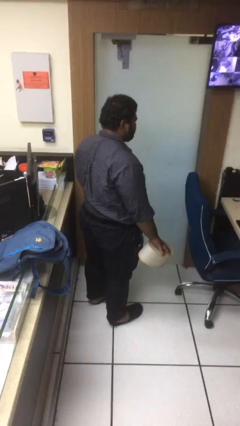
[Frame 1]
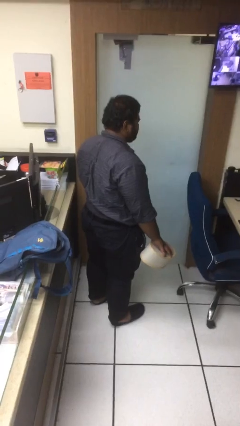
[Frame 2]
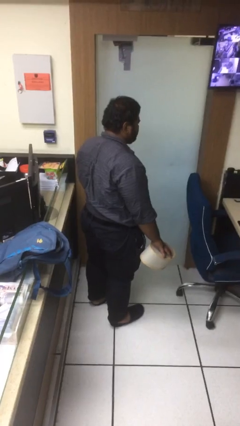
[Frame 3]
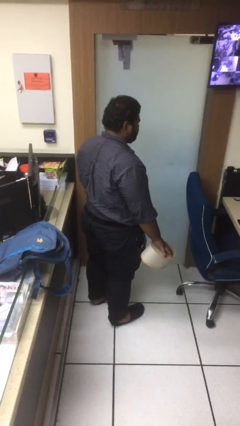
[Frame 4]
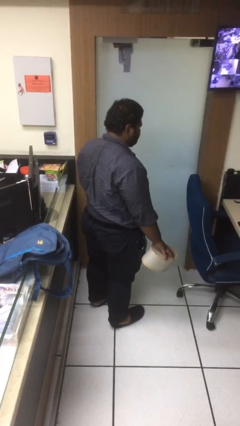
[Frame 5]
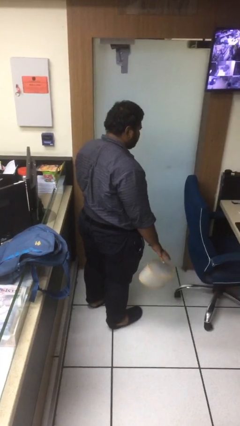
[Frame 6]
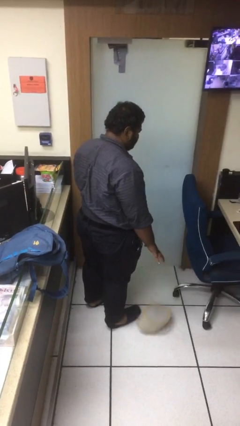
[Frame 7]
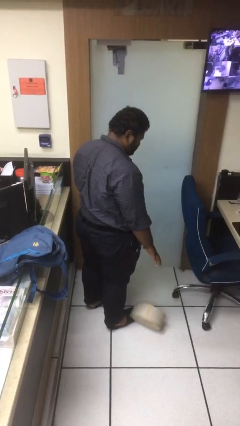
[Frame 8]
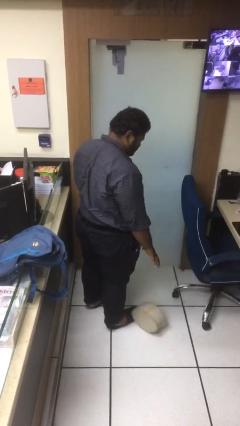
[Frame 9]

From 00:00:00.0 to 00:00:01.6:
person drops object

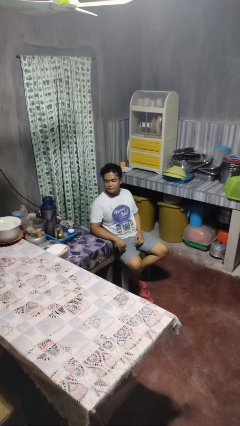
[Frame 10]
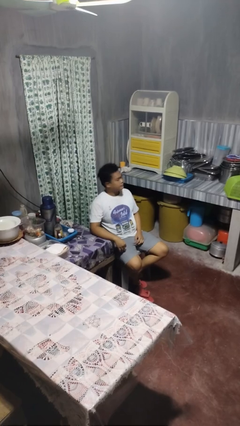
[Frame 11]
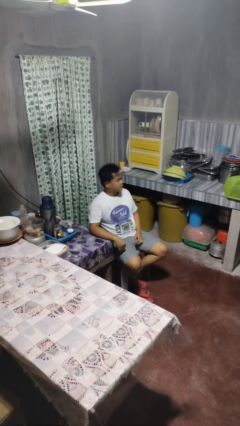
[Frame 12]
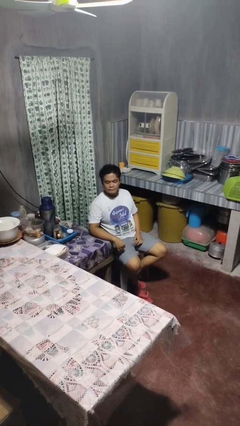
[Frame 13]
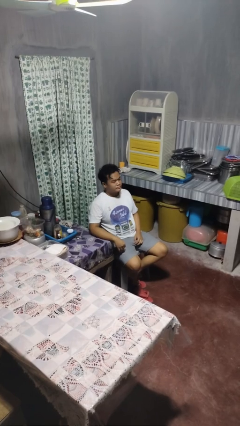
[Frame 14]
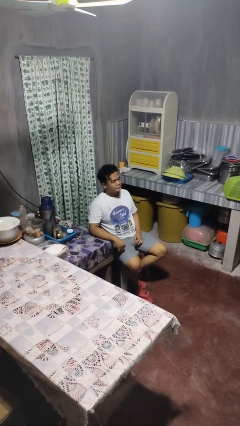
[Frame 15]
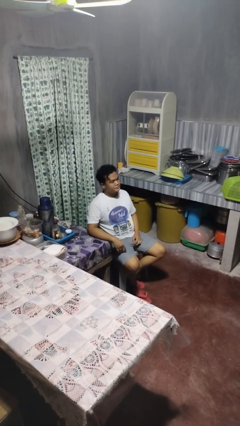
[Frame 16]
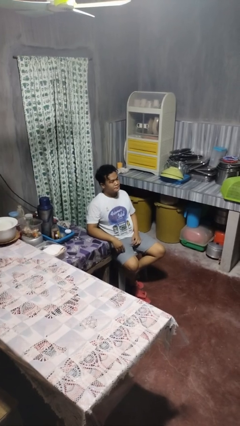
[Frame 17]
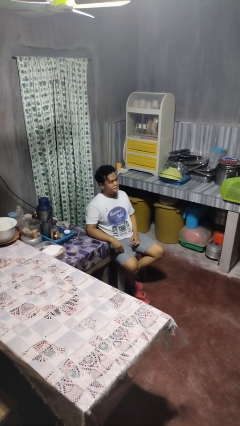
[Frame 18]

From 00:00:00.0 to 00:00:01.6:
person shakes head

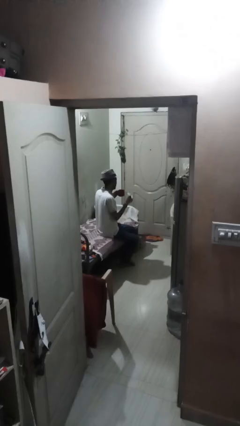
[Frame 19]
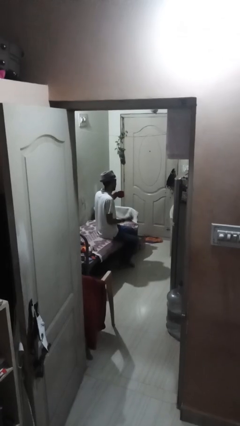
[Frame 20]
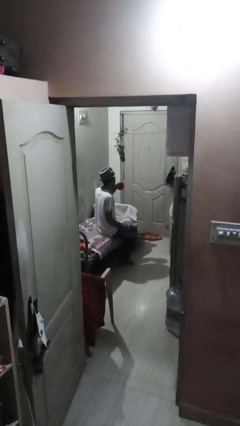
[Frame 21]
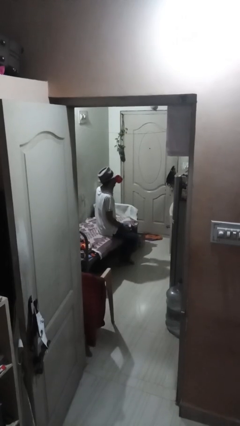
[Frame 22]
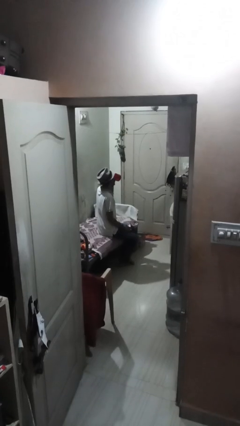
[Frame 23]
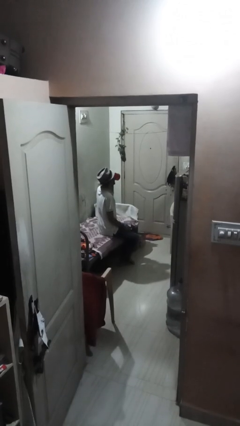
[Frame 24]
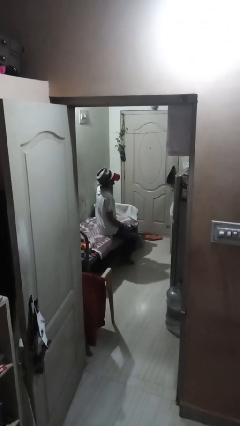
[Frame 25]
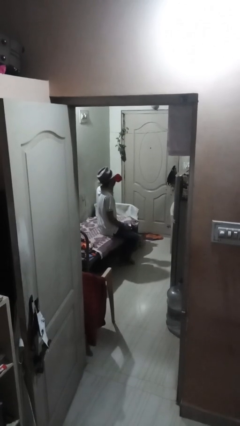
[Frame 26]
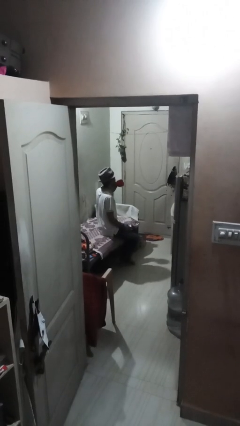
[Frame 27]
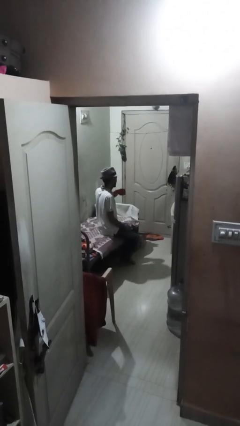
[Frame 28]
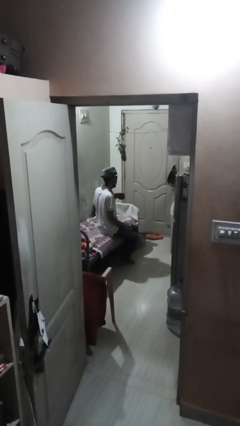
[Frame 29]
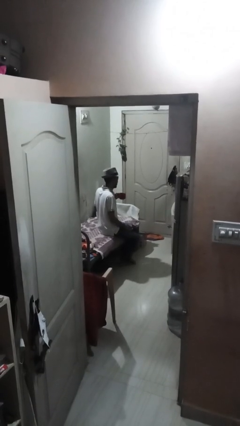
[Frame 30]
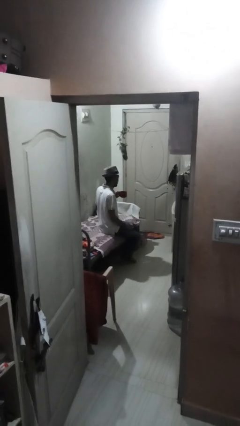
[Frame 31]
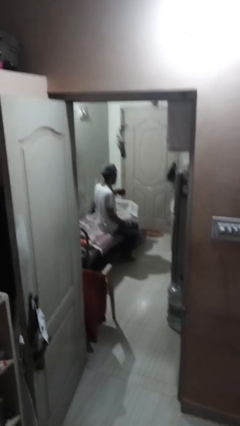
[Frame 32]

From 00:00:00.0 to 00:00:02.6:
person drinks from mug

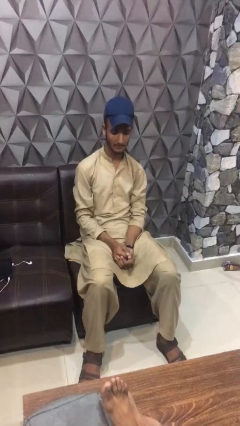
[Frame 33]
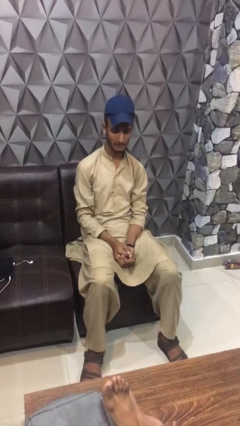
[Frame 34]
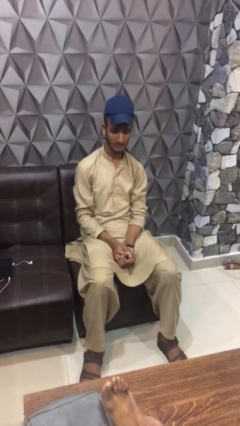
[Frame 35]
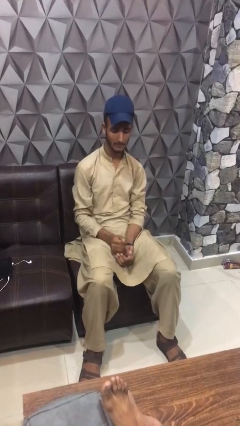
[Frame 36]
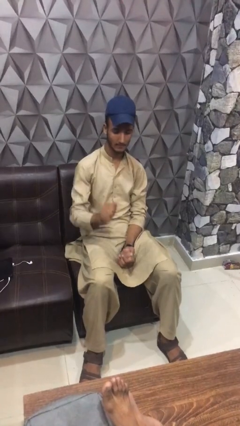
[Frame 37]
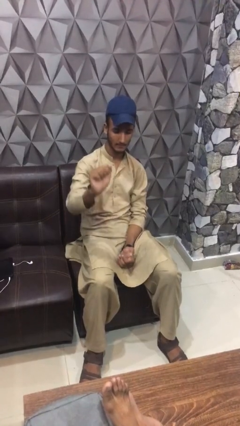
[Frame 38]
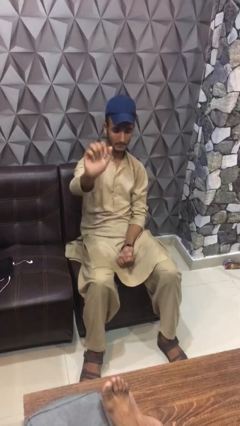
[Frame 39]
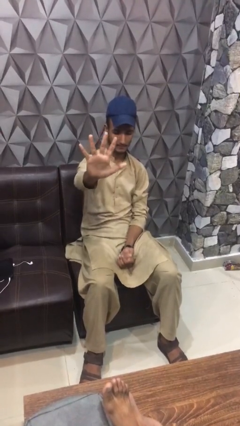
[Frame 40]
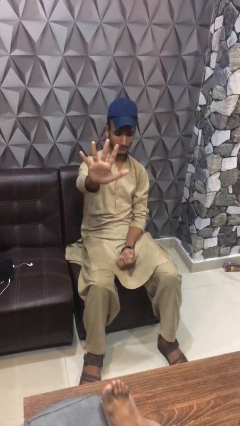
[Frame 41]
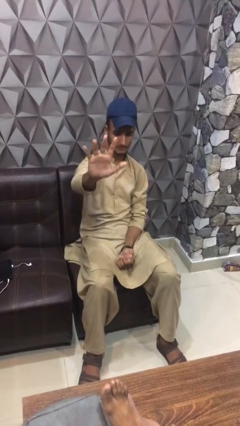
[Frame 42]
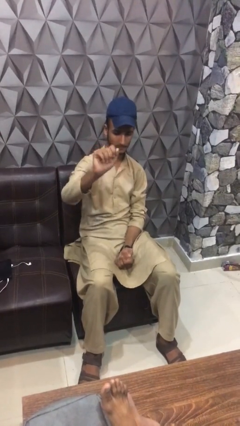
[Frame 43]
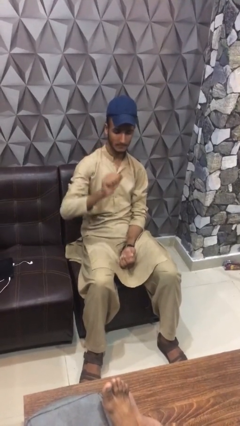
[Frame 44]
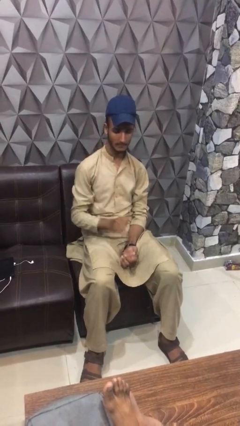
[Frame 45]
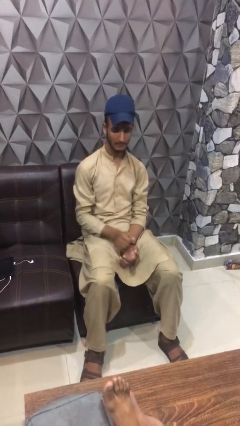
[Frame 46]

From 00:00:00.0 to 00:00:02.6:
person gestures number five

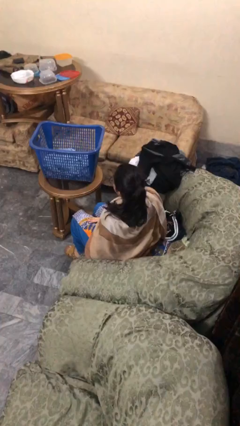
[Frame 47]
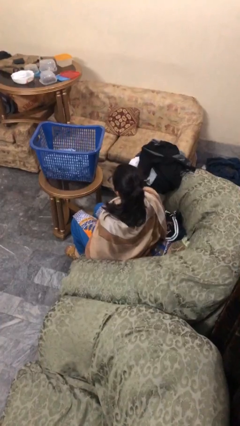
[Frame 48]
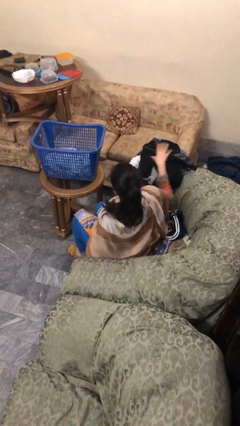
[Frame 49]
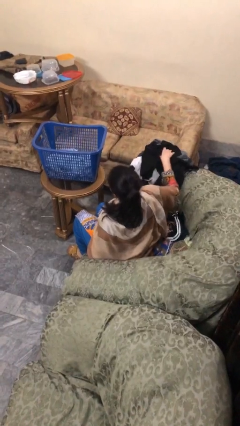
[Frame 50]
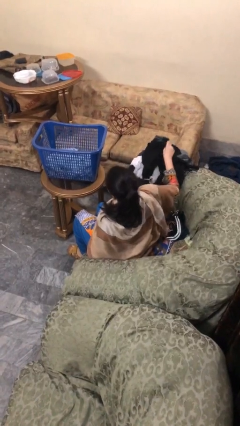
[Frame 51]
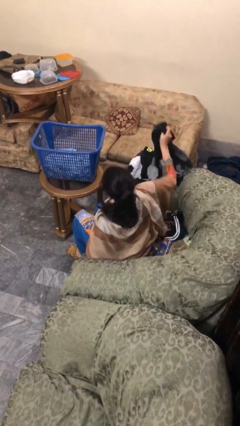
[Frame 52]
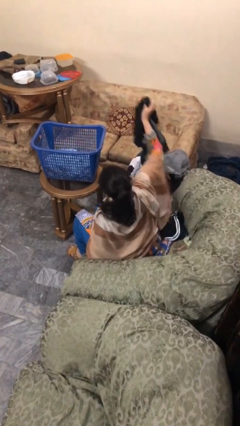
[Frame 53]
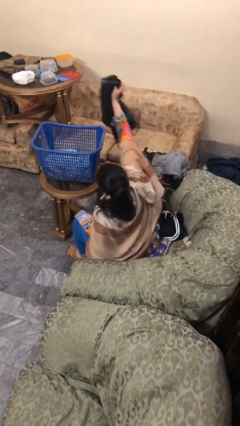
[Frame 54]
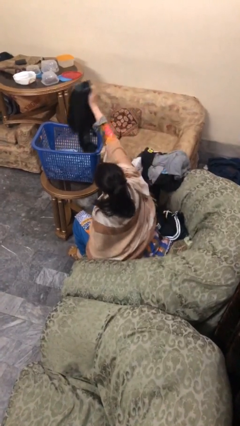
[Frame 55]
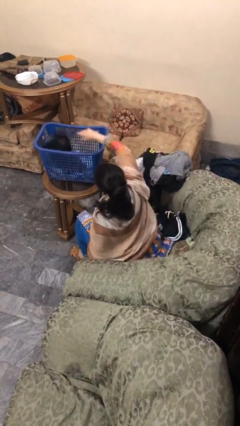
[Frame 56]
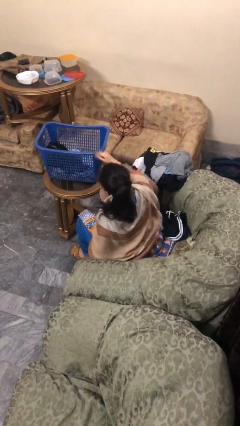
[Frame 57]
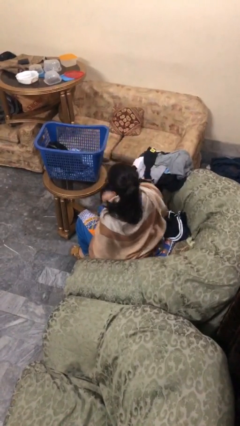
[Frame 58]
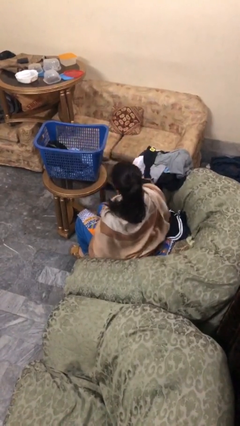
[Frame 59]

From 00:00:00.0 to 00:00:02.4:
person puts object into basket

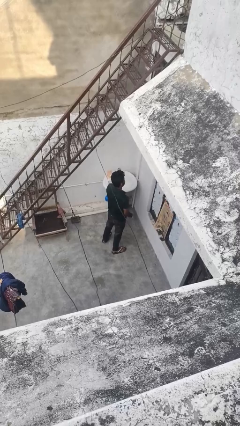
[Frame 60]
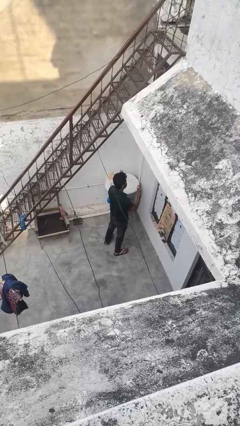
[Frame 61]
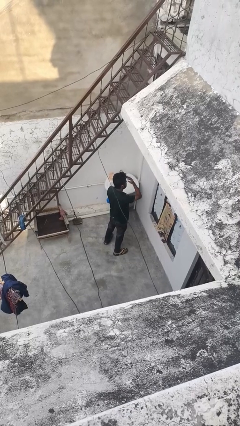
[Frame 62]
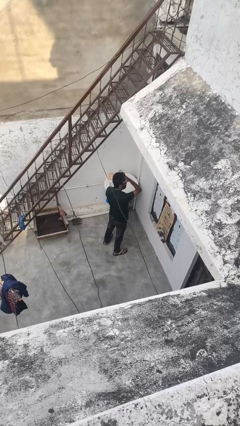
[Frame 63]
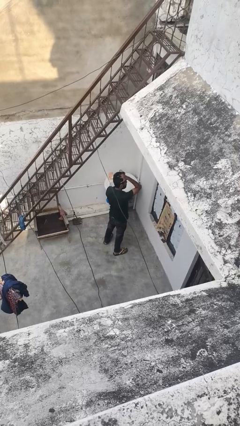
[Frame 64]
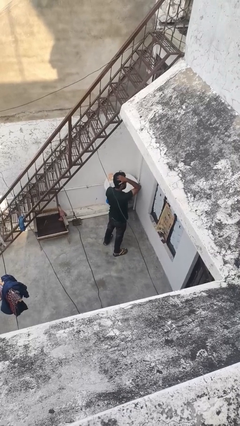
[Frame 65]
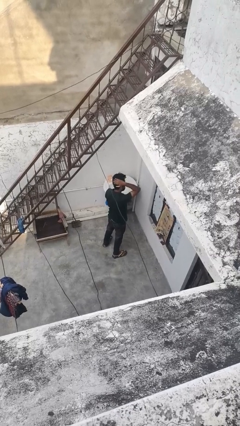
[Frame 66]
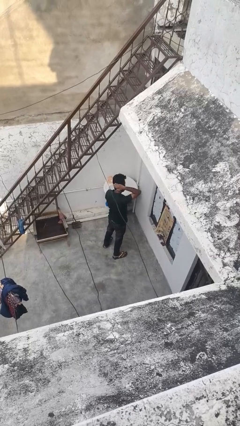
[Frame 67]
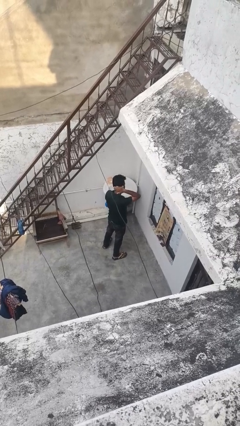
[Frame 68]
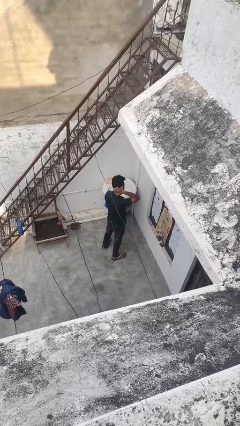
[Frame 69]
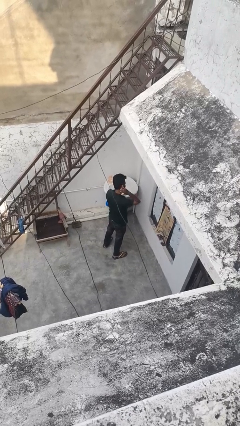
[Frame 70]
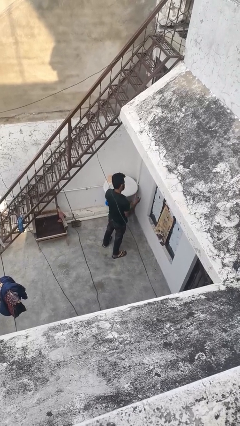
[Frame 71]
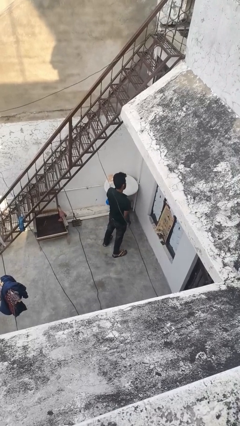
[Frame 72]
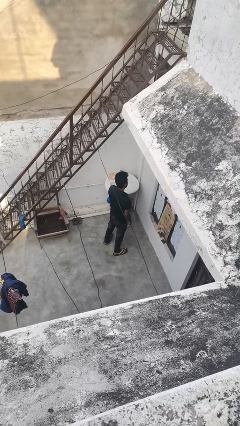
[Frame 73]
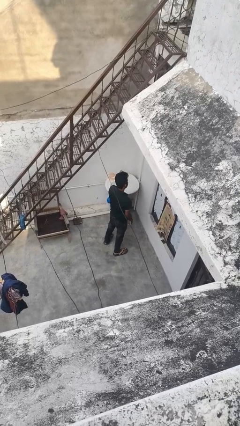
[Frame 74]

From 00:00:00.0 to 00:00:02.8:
person strokes hair

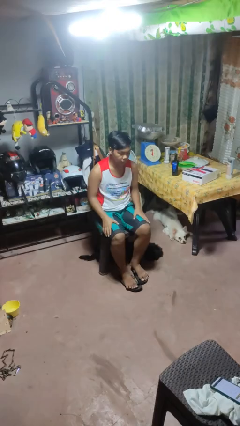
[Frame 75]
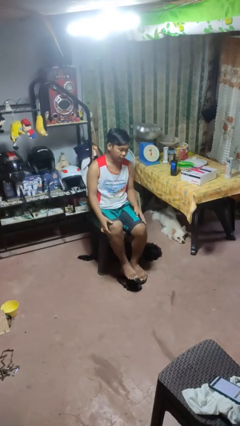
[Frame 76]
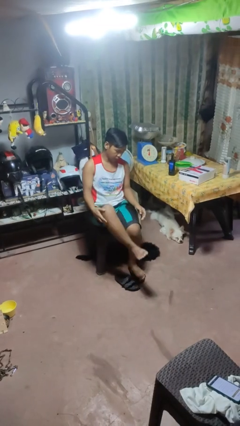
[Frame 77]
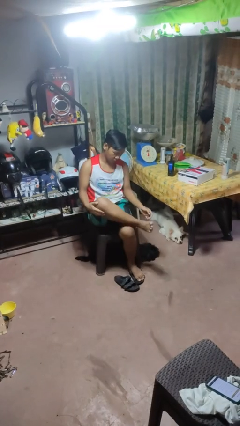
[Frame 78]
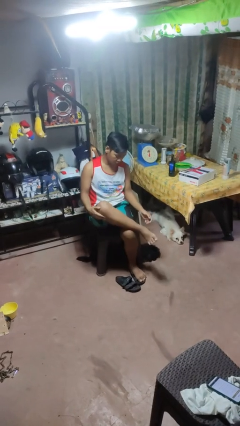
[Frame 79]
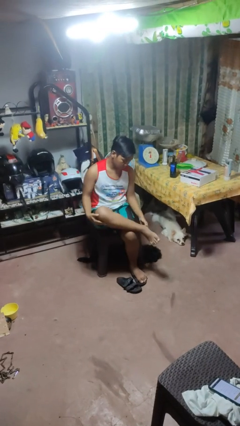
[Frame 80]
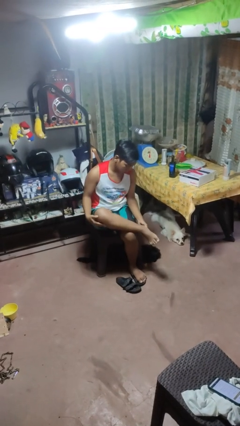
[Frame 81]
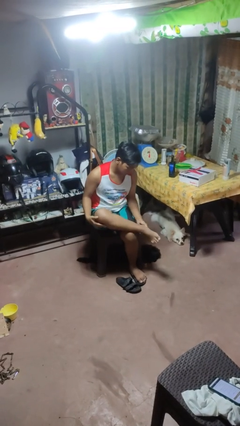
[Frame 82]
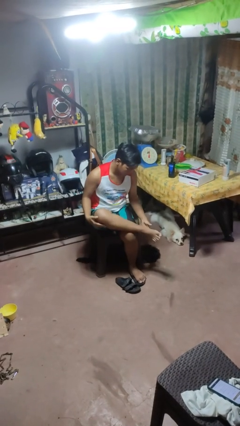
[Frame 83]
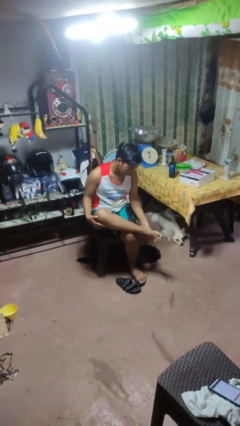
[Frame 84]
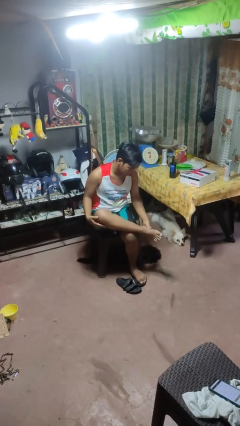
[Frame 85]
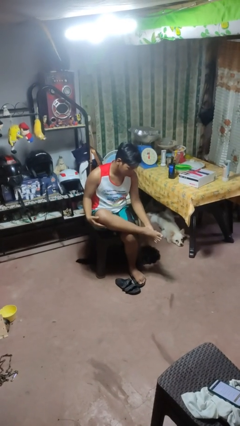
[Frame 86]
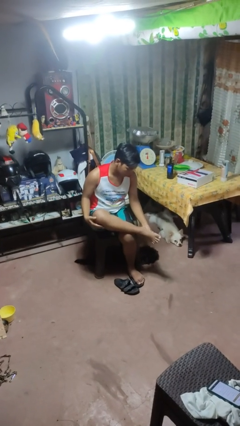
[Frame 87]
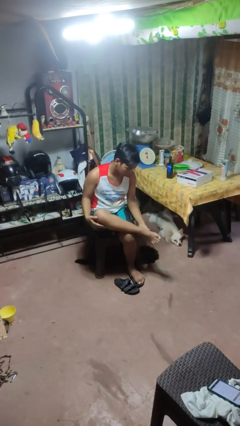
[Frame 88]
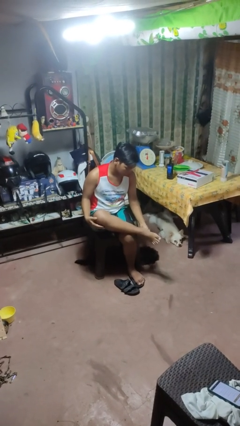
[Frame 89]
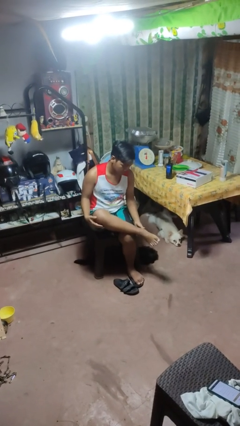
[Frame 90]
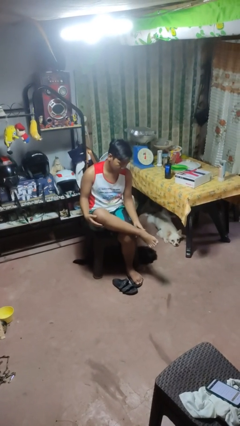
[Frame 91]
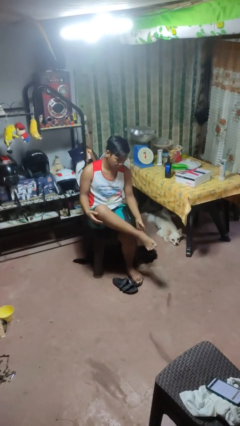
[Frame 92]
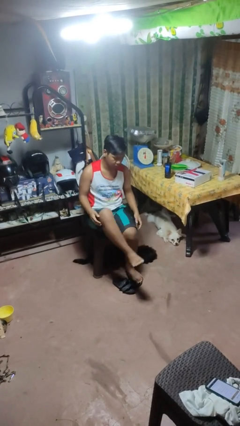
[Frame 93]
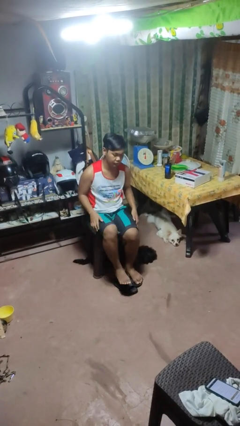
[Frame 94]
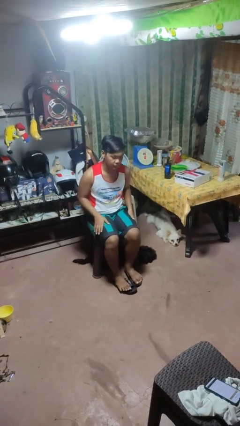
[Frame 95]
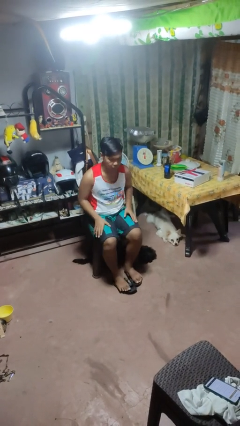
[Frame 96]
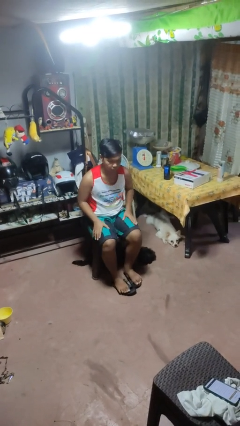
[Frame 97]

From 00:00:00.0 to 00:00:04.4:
person rubs foot
